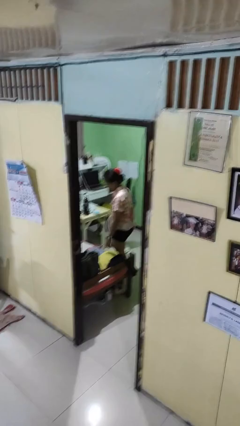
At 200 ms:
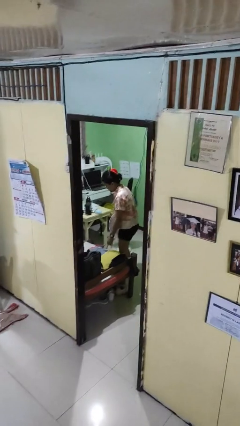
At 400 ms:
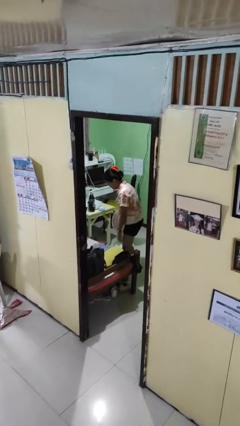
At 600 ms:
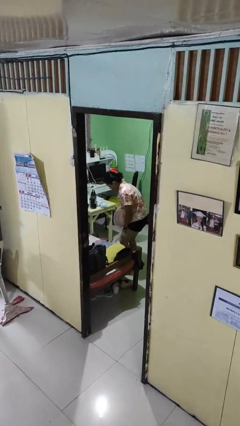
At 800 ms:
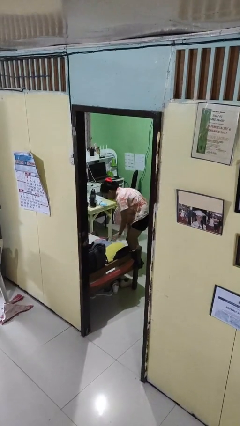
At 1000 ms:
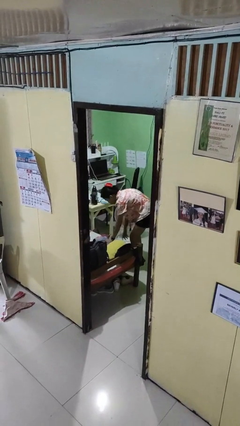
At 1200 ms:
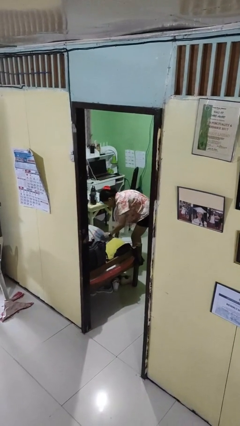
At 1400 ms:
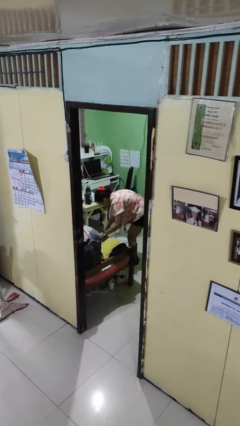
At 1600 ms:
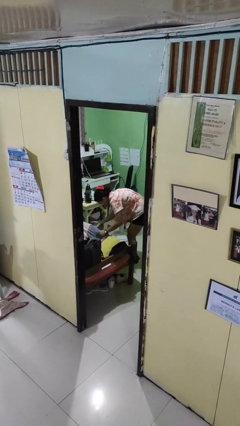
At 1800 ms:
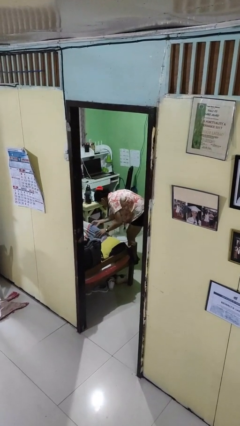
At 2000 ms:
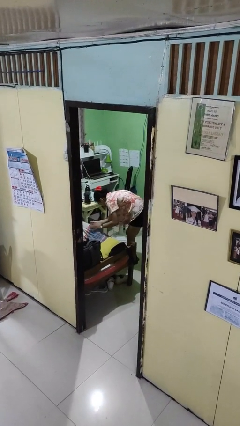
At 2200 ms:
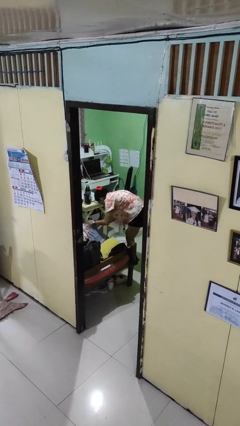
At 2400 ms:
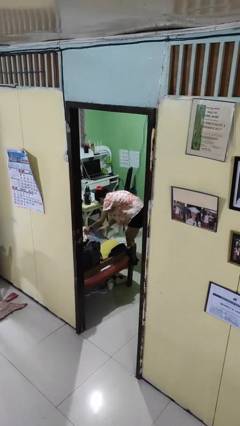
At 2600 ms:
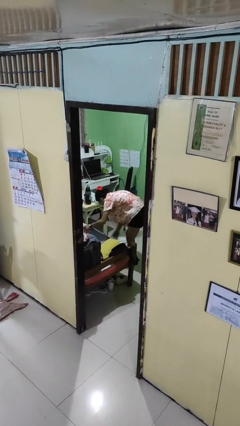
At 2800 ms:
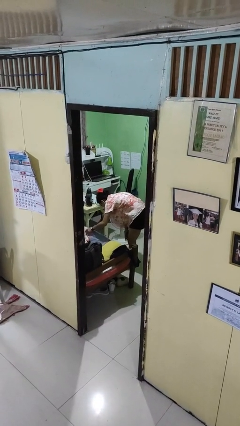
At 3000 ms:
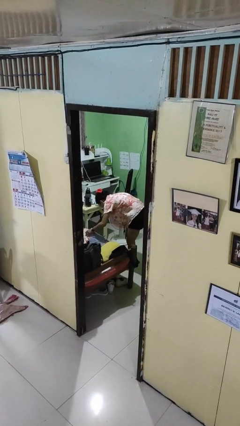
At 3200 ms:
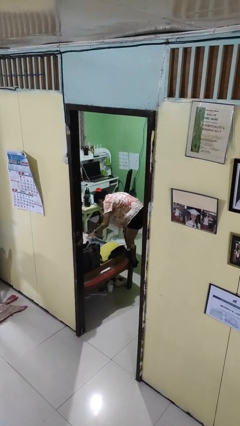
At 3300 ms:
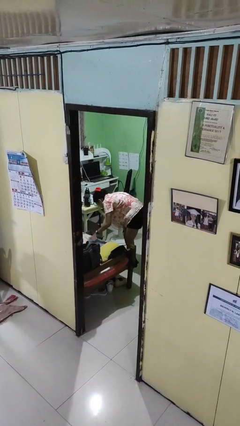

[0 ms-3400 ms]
person searches under bed

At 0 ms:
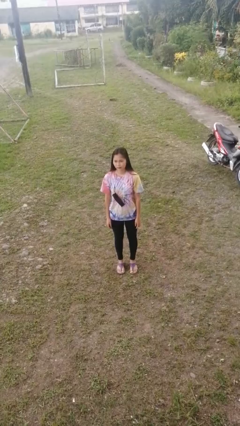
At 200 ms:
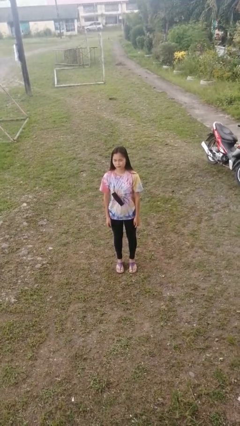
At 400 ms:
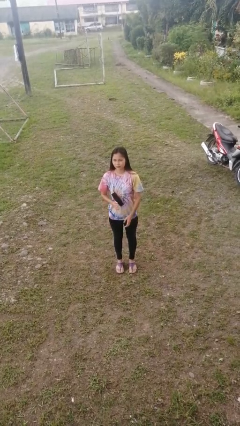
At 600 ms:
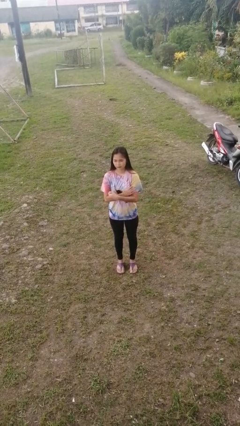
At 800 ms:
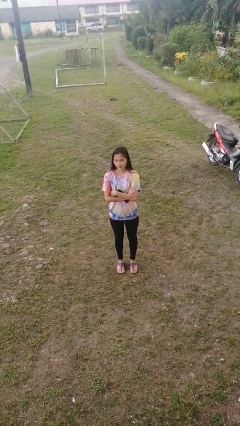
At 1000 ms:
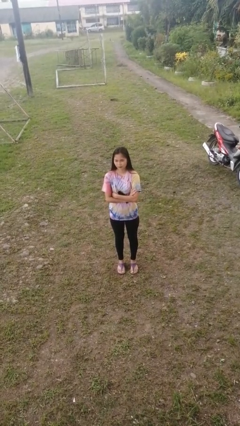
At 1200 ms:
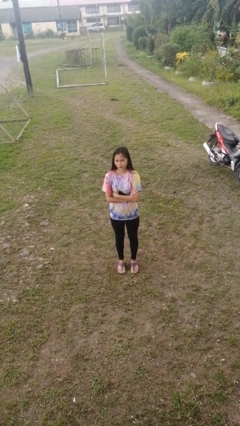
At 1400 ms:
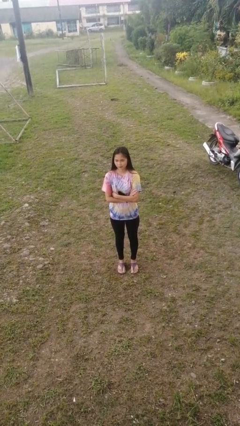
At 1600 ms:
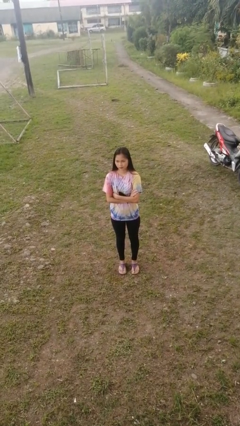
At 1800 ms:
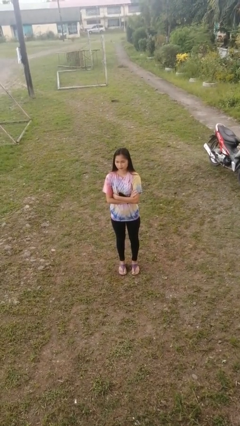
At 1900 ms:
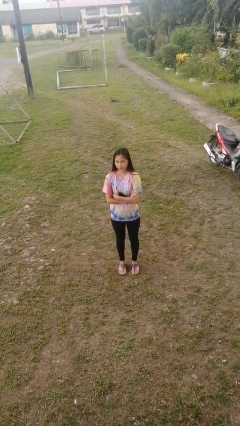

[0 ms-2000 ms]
person crosses arms

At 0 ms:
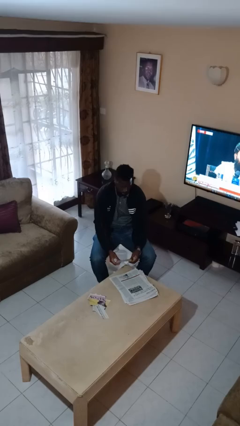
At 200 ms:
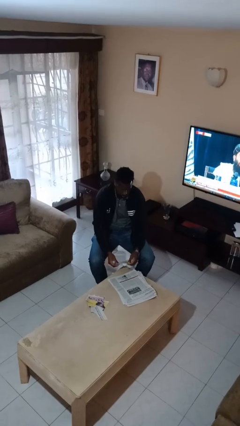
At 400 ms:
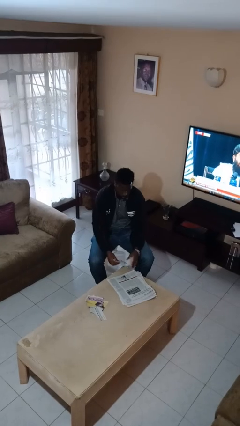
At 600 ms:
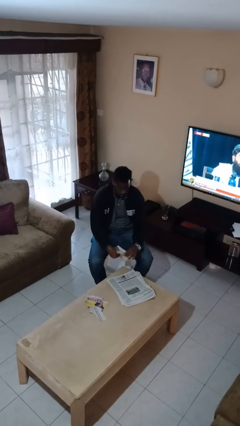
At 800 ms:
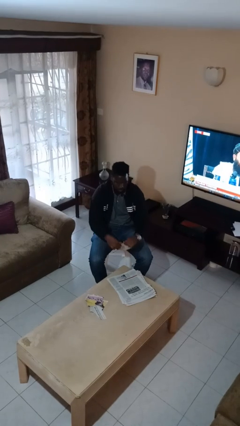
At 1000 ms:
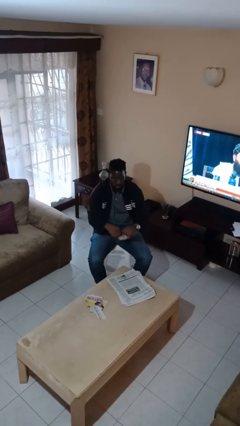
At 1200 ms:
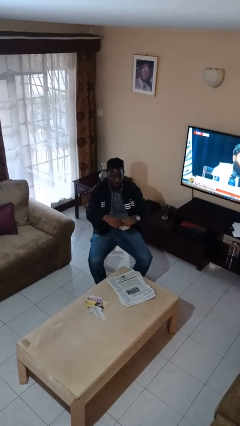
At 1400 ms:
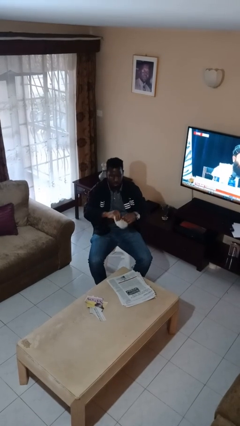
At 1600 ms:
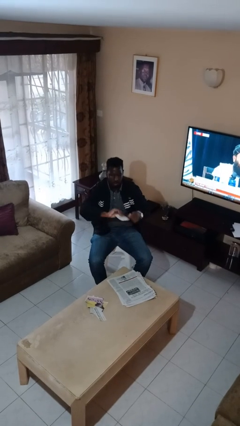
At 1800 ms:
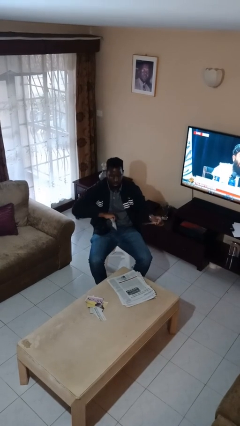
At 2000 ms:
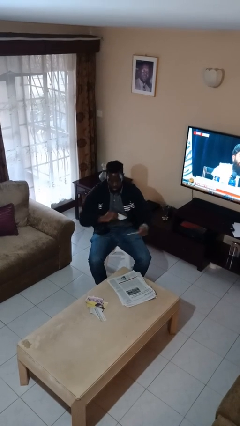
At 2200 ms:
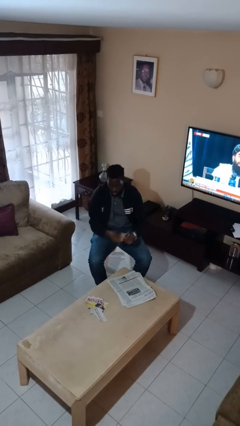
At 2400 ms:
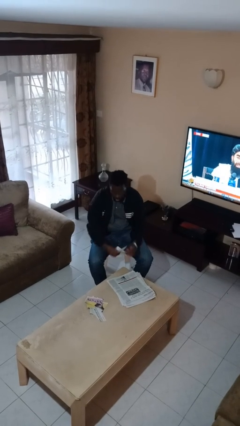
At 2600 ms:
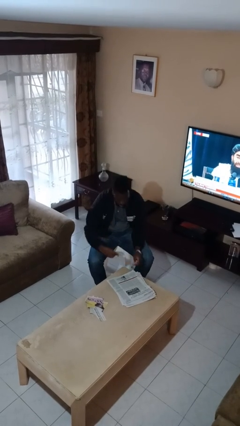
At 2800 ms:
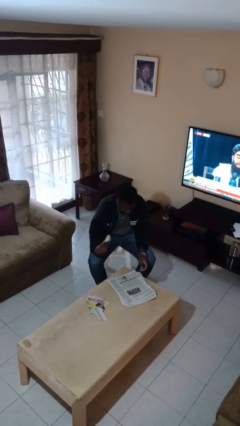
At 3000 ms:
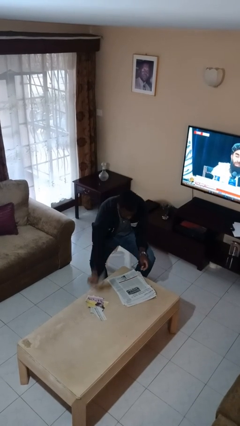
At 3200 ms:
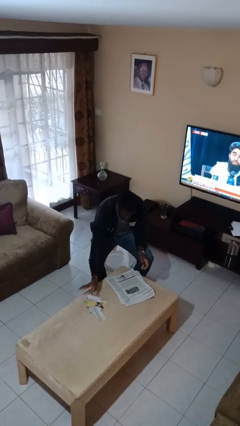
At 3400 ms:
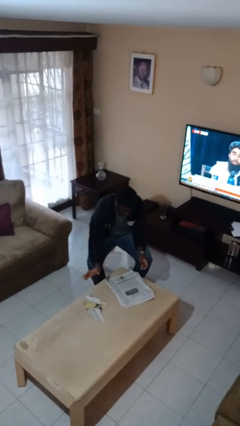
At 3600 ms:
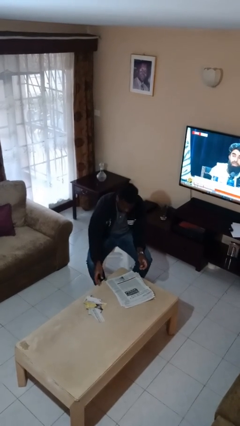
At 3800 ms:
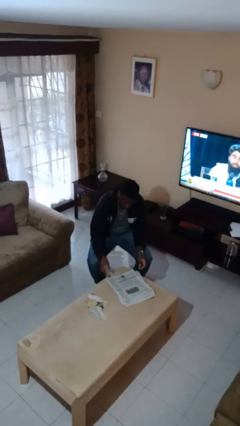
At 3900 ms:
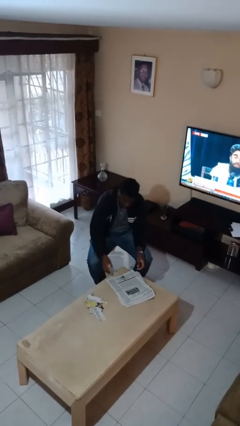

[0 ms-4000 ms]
person tears paper

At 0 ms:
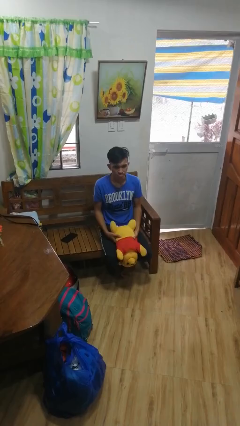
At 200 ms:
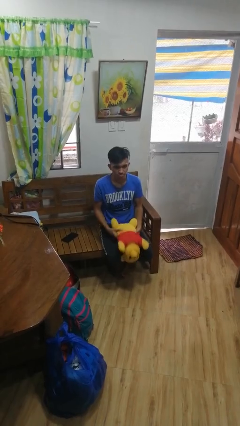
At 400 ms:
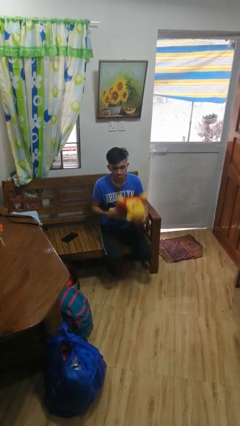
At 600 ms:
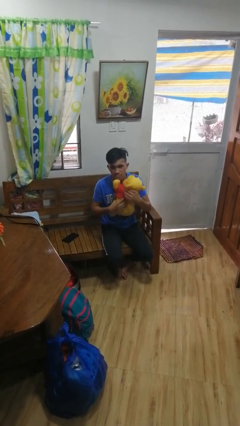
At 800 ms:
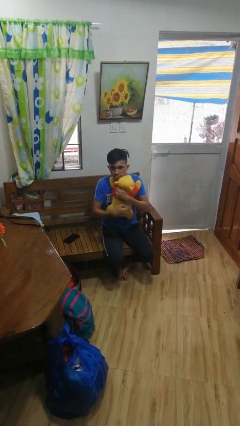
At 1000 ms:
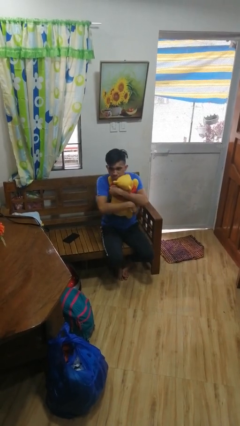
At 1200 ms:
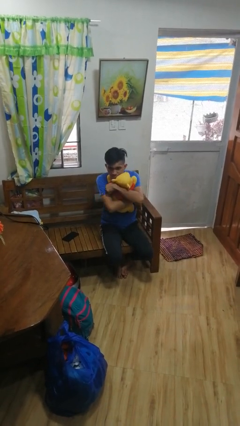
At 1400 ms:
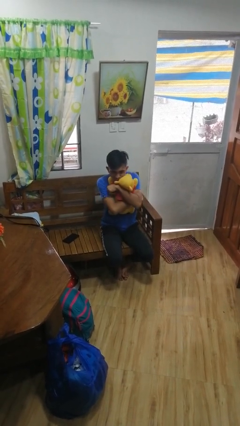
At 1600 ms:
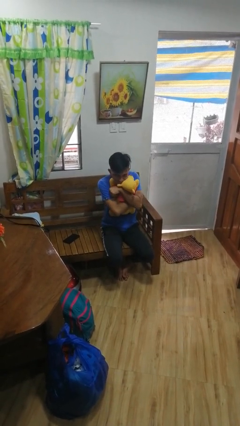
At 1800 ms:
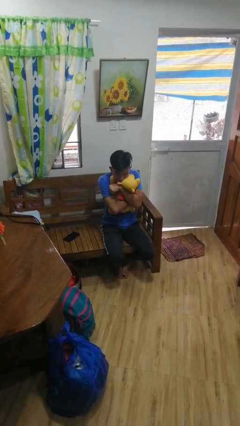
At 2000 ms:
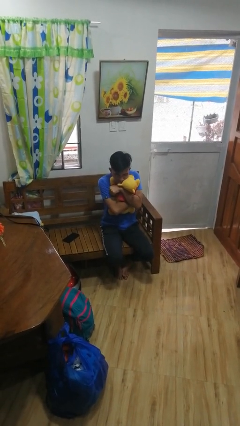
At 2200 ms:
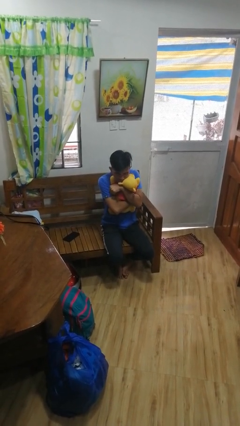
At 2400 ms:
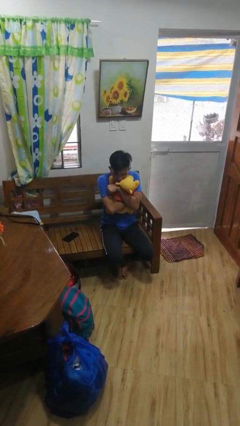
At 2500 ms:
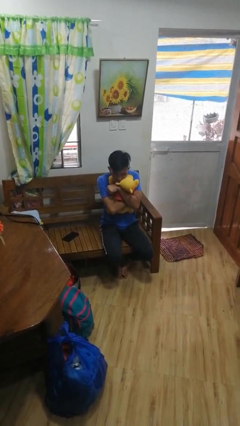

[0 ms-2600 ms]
person hugs stuffed animal

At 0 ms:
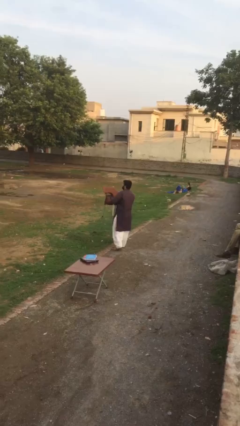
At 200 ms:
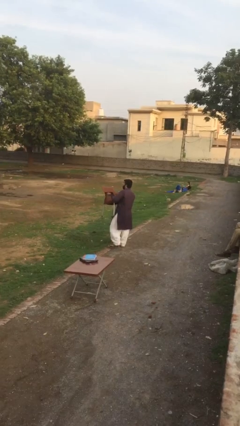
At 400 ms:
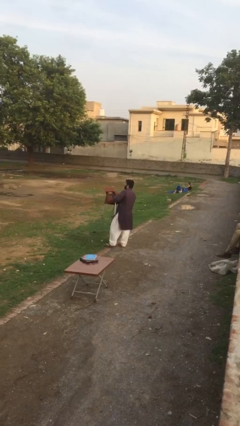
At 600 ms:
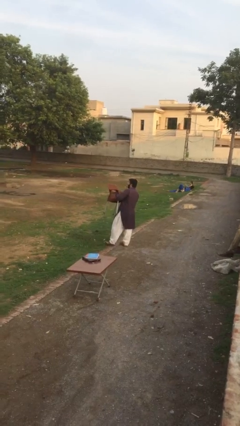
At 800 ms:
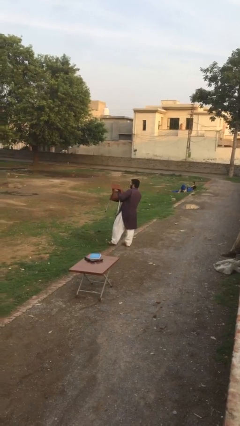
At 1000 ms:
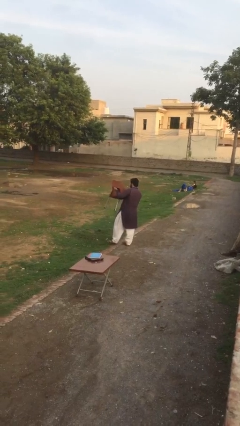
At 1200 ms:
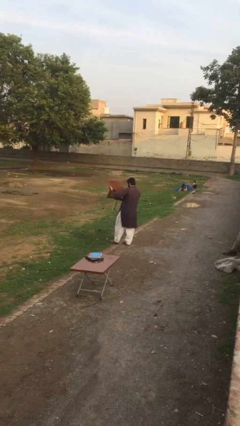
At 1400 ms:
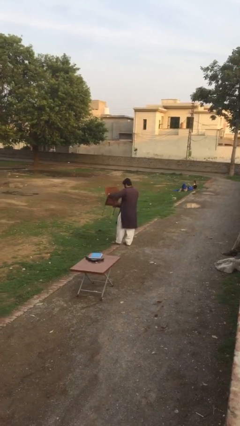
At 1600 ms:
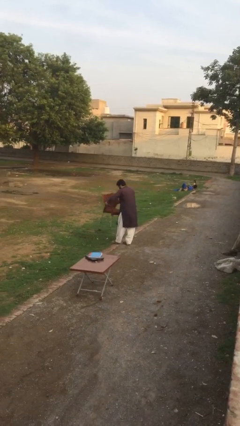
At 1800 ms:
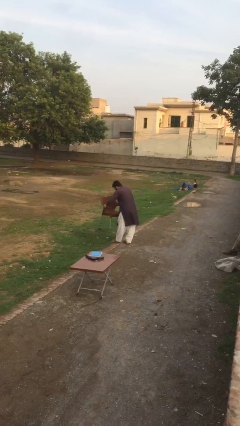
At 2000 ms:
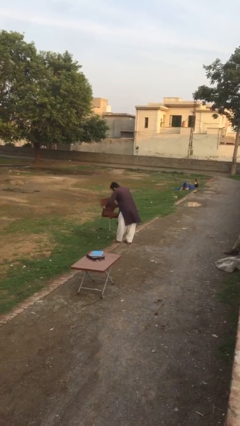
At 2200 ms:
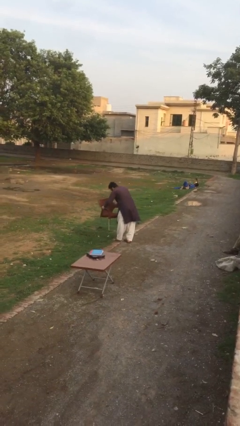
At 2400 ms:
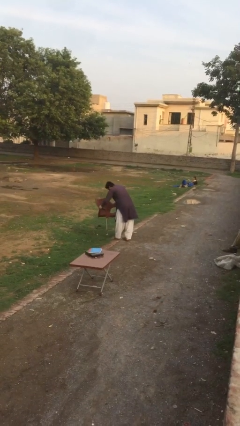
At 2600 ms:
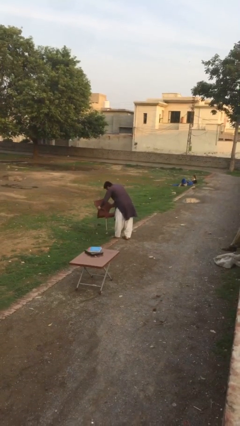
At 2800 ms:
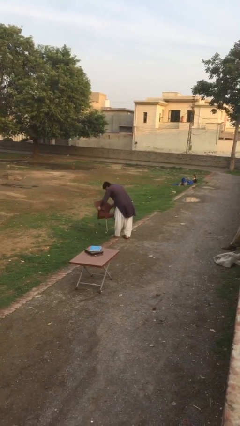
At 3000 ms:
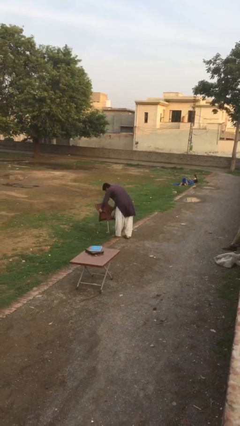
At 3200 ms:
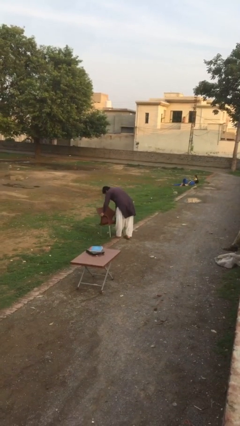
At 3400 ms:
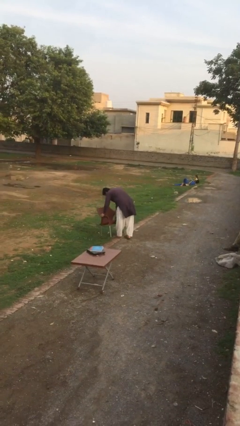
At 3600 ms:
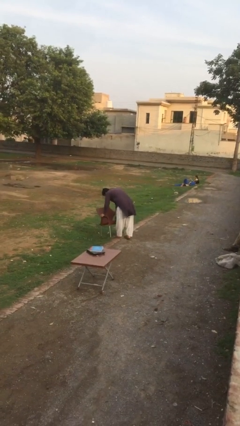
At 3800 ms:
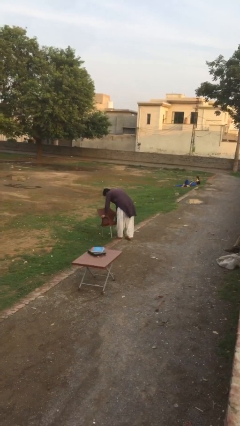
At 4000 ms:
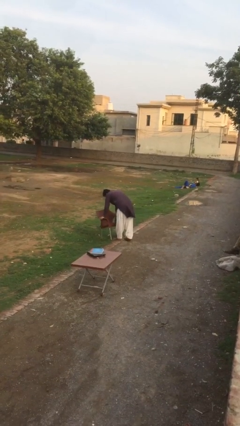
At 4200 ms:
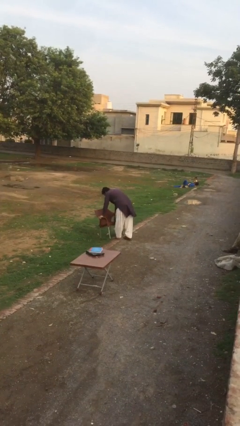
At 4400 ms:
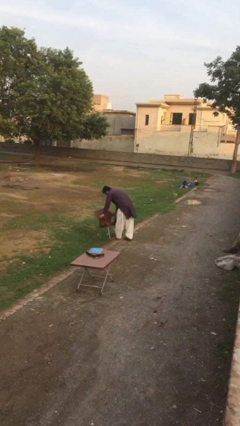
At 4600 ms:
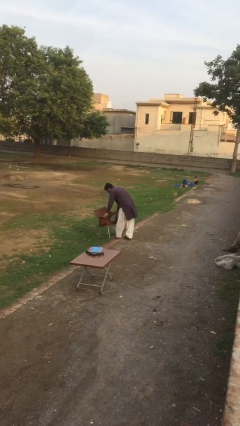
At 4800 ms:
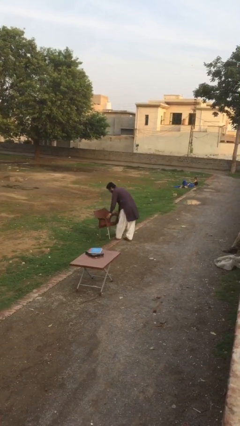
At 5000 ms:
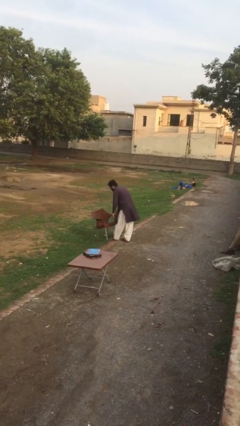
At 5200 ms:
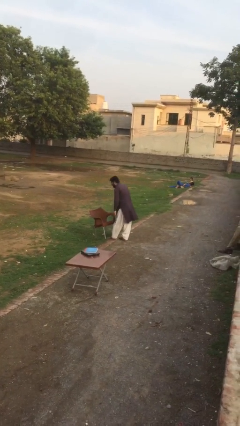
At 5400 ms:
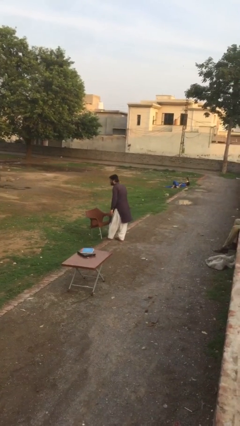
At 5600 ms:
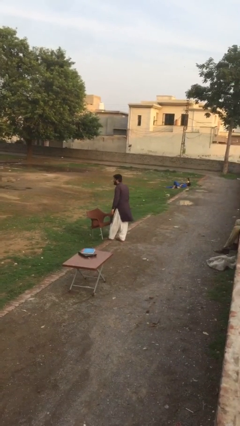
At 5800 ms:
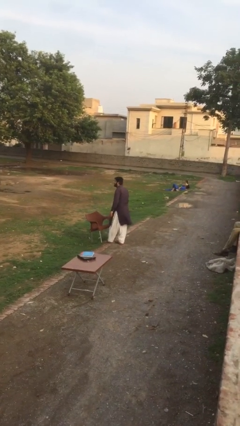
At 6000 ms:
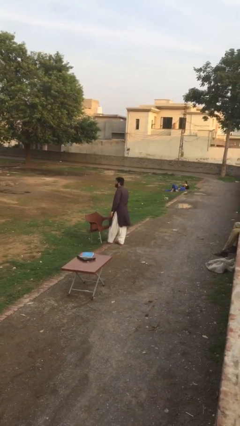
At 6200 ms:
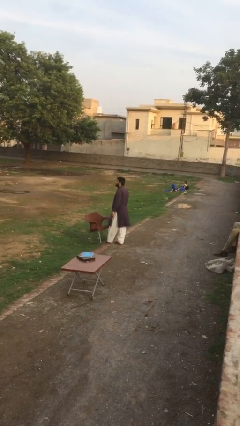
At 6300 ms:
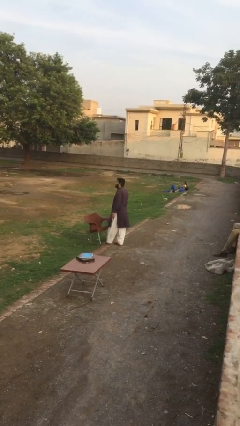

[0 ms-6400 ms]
person puts down object on floor
